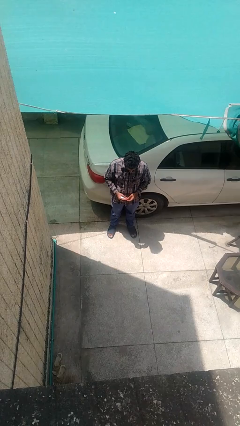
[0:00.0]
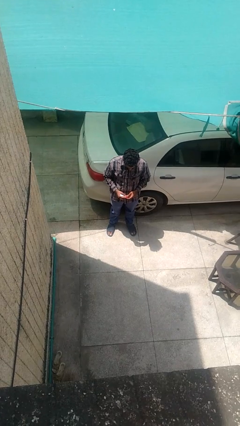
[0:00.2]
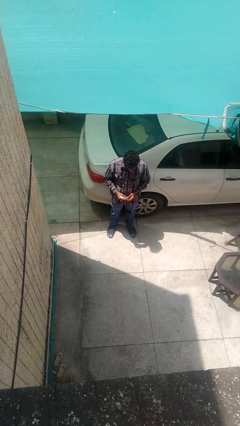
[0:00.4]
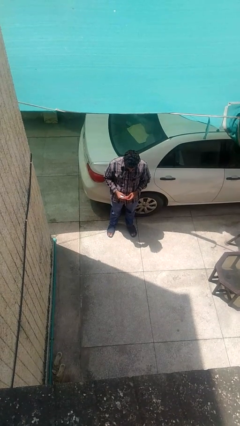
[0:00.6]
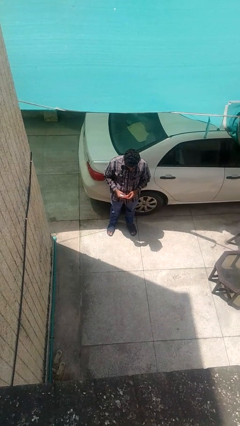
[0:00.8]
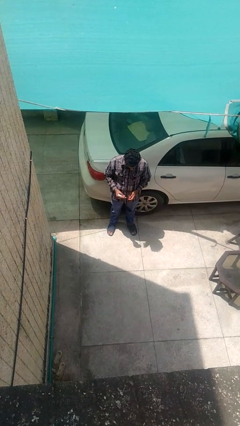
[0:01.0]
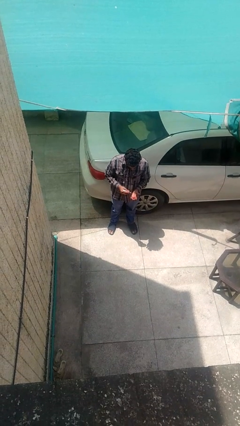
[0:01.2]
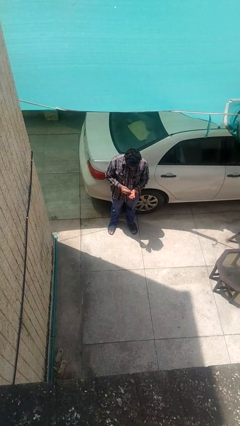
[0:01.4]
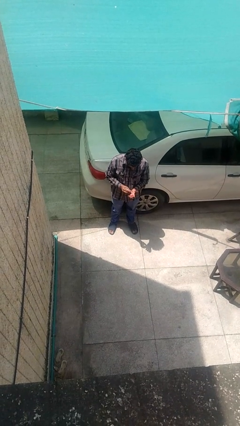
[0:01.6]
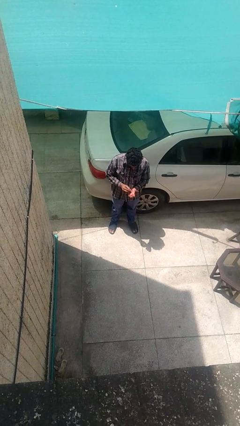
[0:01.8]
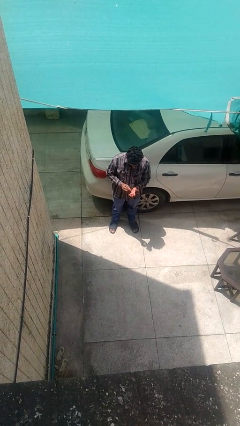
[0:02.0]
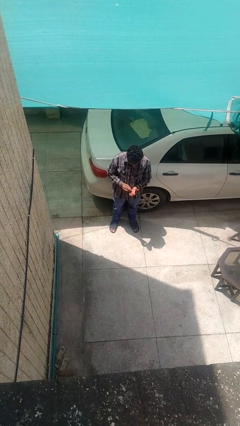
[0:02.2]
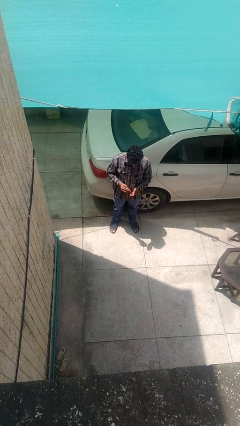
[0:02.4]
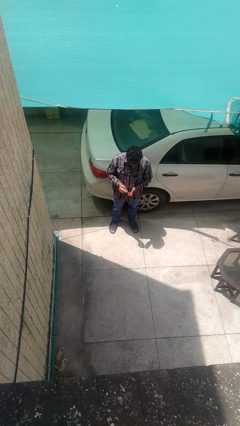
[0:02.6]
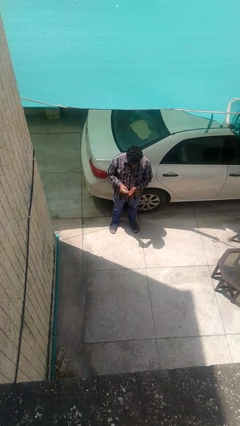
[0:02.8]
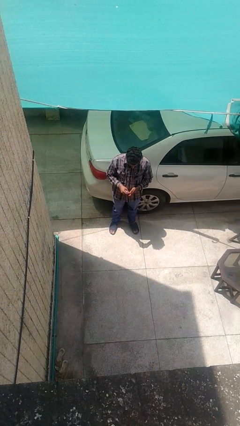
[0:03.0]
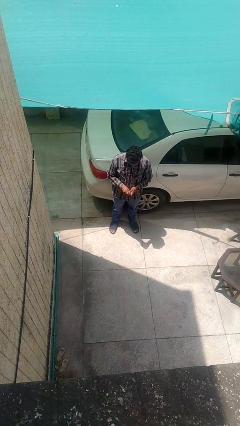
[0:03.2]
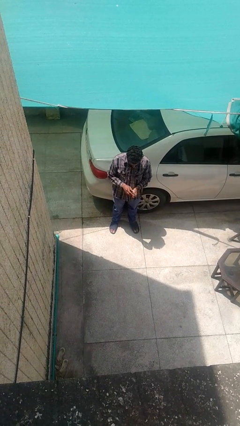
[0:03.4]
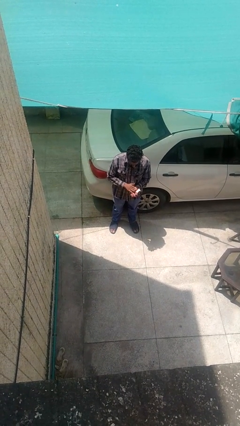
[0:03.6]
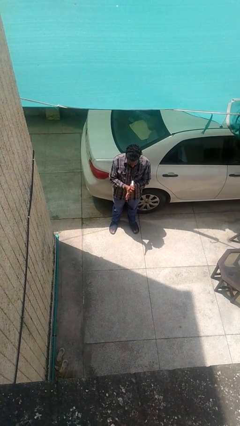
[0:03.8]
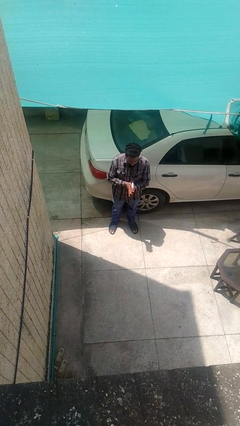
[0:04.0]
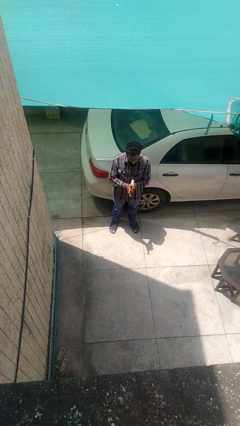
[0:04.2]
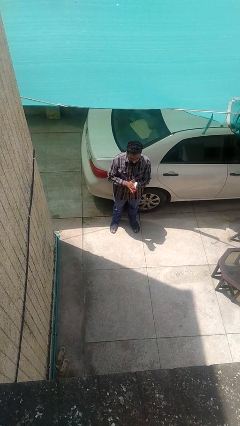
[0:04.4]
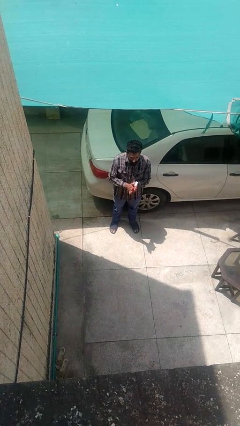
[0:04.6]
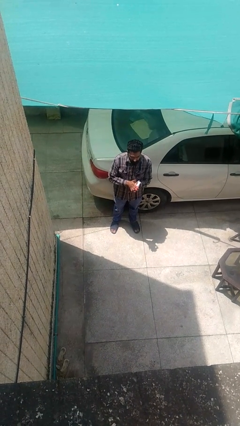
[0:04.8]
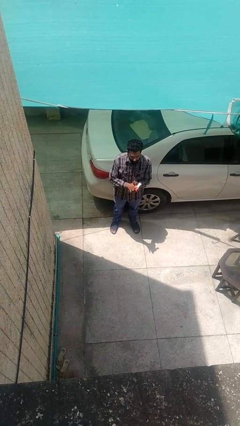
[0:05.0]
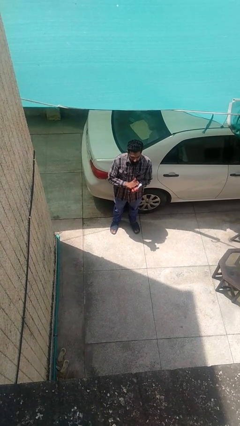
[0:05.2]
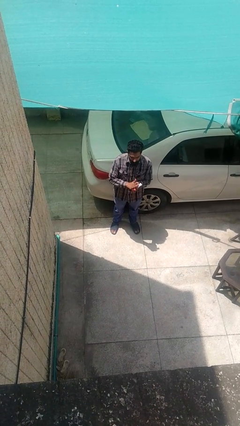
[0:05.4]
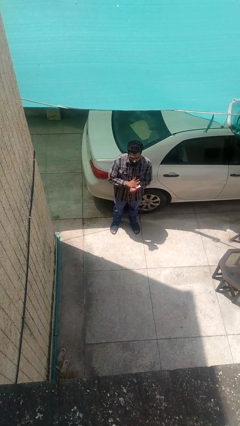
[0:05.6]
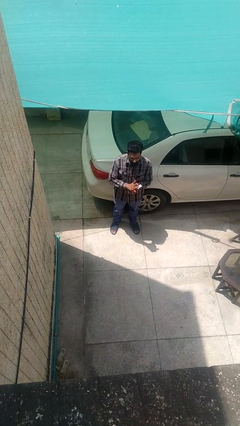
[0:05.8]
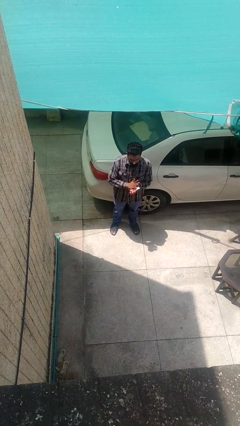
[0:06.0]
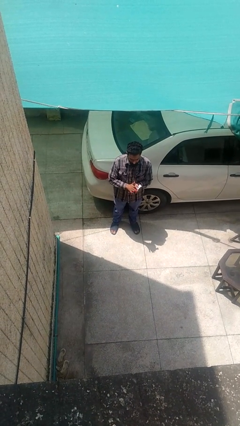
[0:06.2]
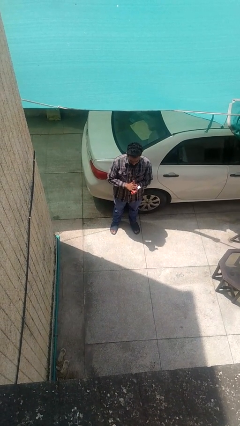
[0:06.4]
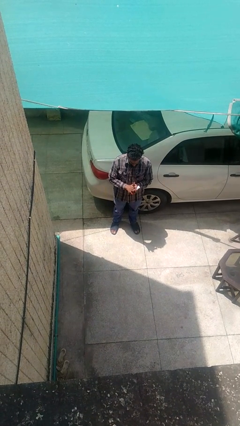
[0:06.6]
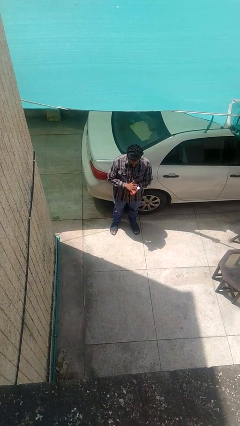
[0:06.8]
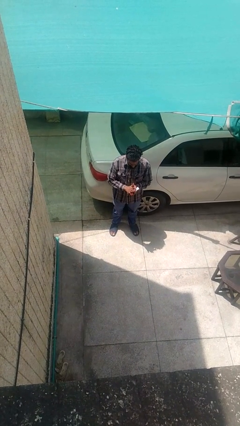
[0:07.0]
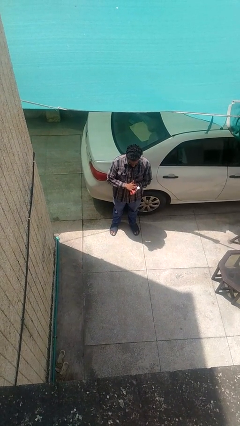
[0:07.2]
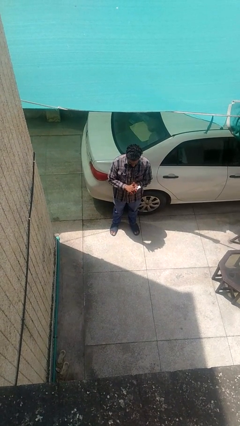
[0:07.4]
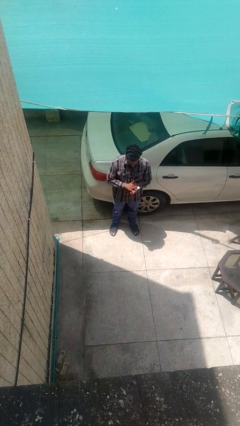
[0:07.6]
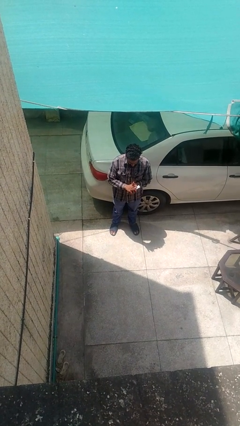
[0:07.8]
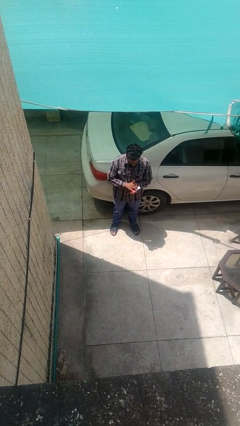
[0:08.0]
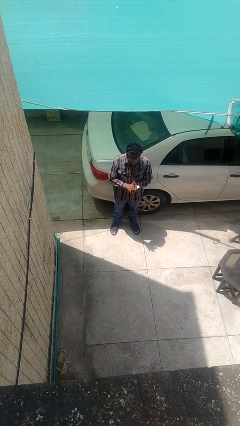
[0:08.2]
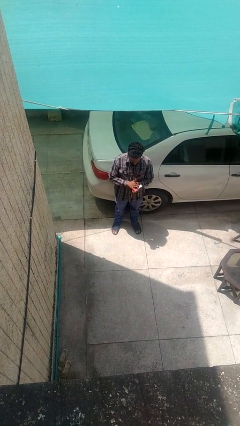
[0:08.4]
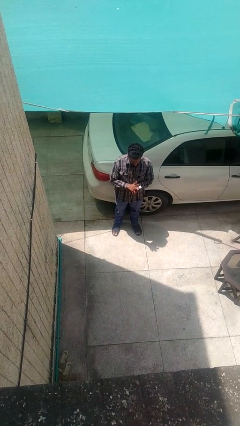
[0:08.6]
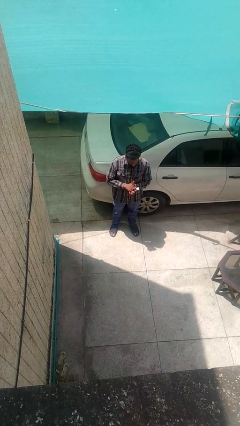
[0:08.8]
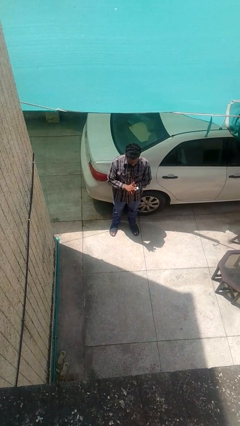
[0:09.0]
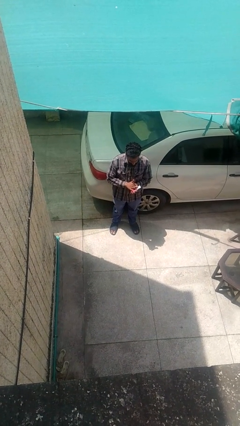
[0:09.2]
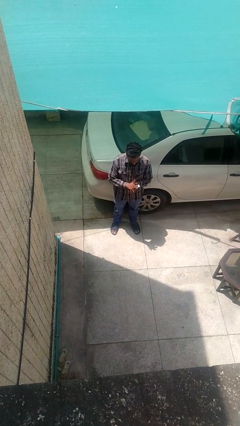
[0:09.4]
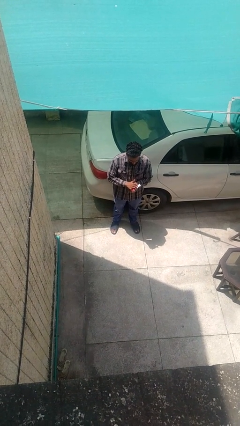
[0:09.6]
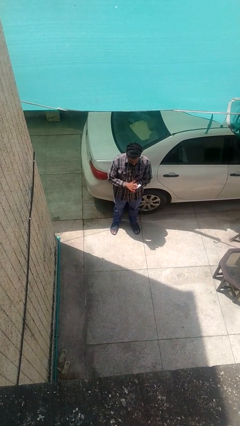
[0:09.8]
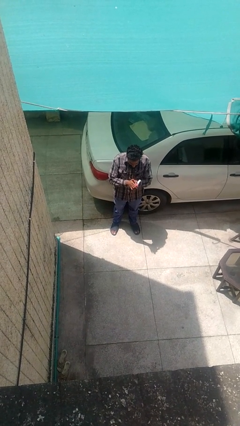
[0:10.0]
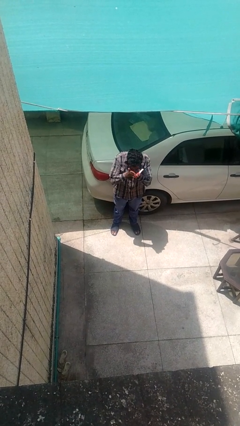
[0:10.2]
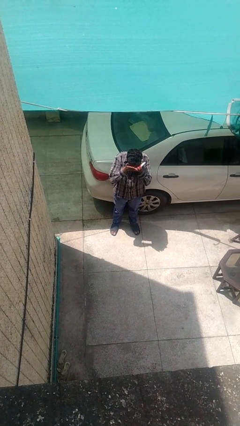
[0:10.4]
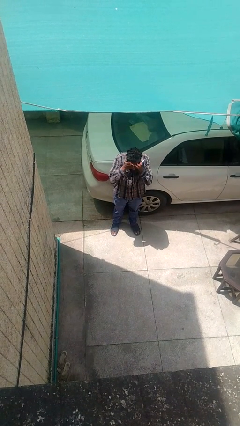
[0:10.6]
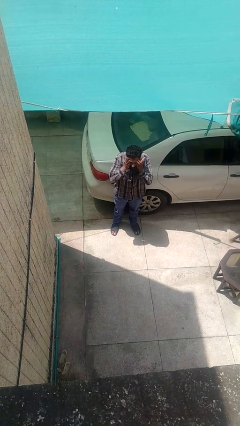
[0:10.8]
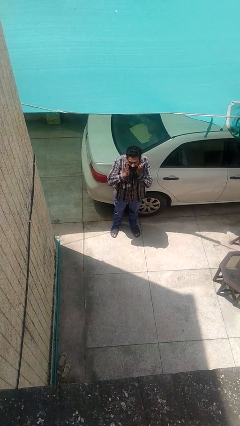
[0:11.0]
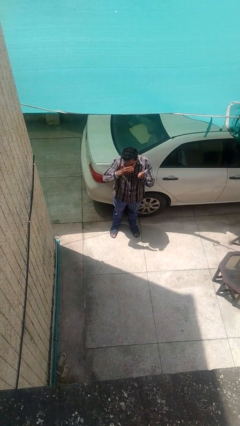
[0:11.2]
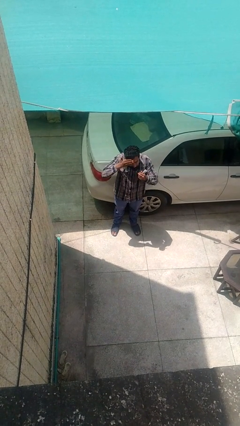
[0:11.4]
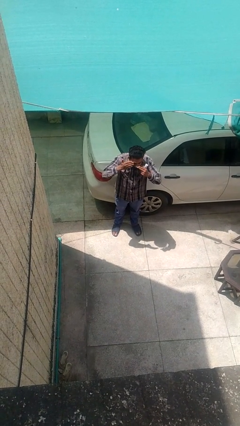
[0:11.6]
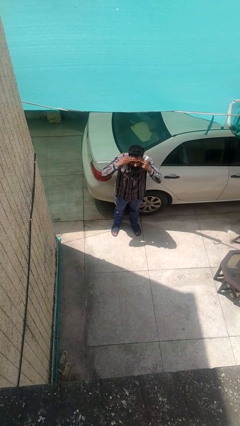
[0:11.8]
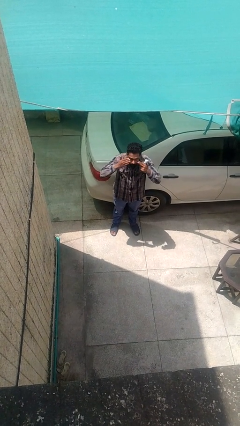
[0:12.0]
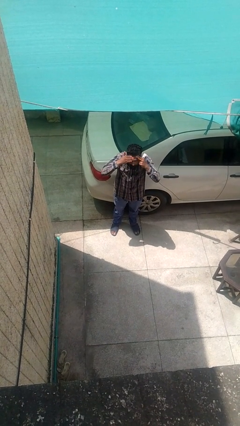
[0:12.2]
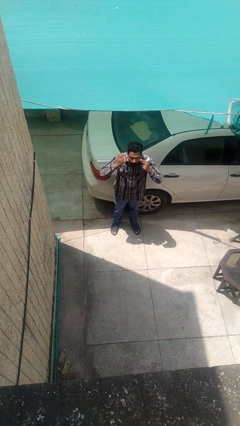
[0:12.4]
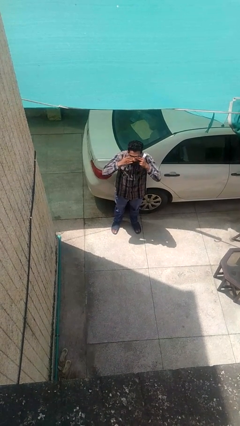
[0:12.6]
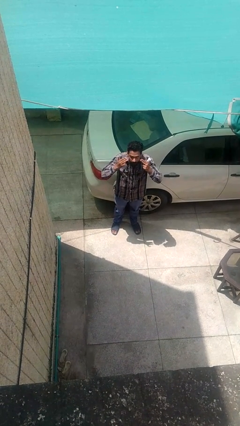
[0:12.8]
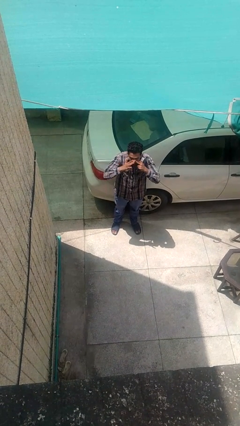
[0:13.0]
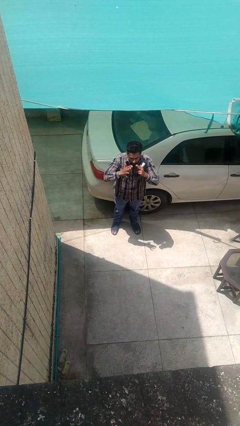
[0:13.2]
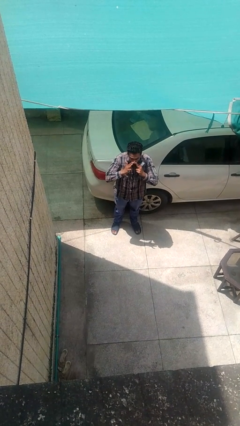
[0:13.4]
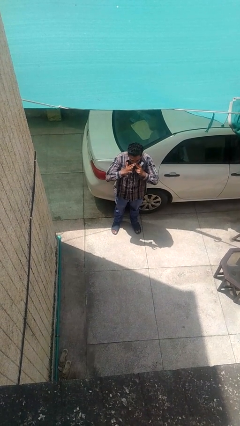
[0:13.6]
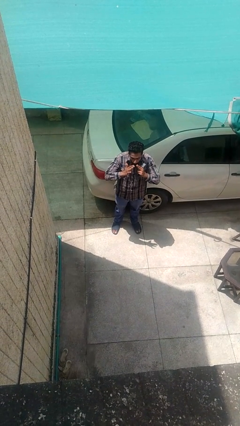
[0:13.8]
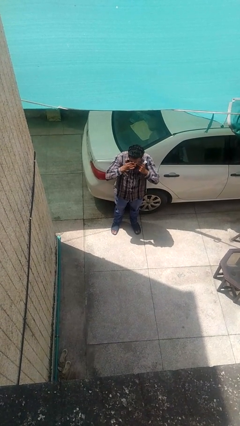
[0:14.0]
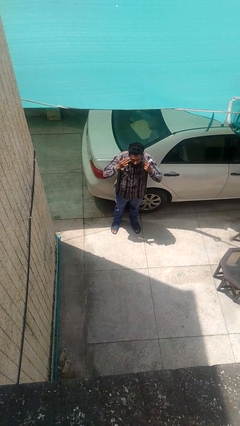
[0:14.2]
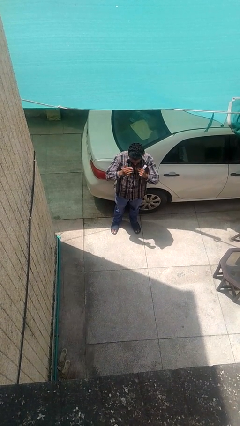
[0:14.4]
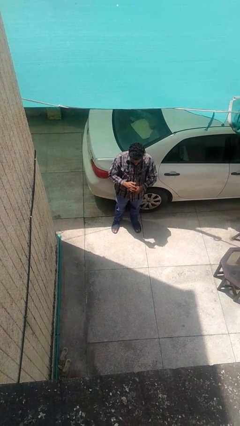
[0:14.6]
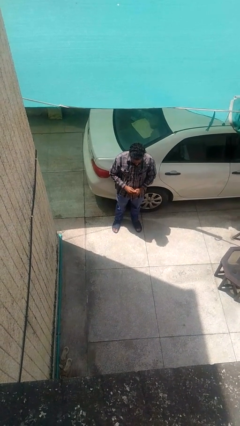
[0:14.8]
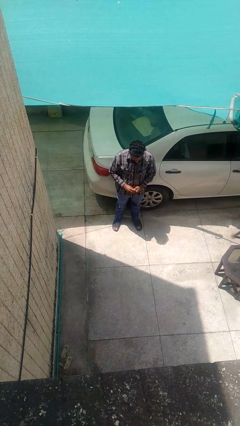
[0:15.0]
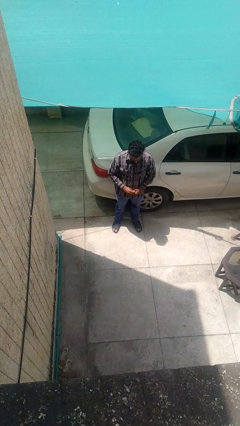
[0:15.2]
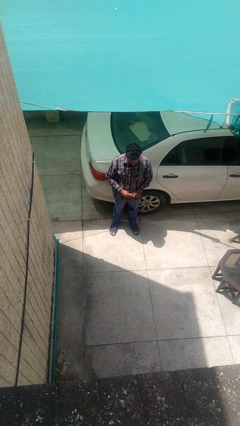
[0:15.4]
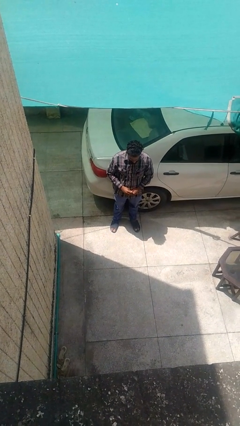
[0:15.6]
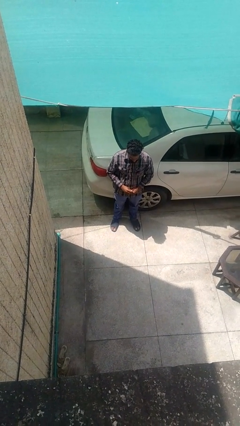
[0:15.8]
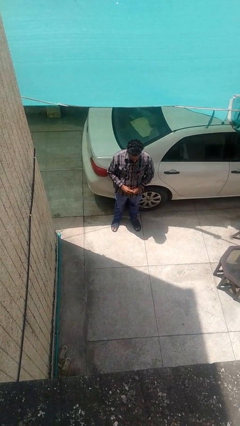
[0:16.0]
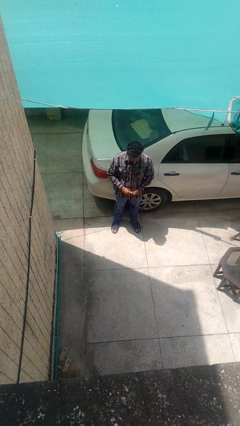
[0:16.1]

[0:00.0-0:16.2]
person applies facial moisturizer

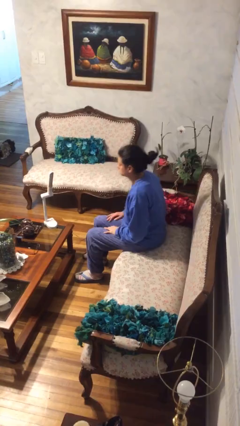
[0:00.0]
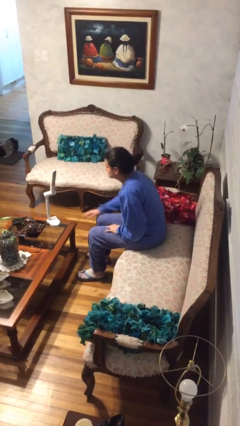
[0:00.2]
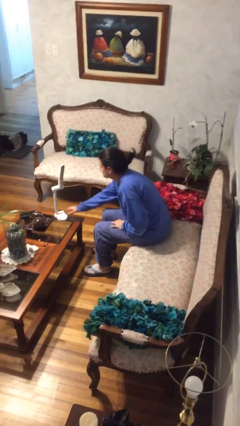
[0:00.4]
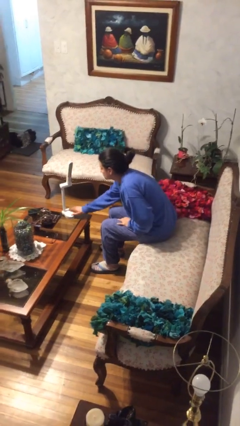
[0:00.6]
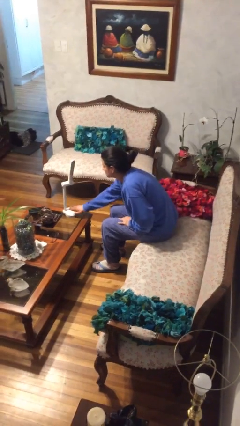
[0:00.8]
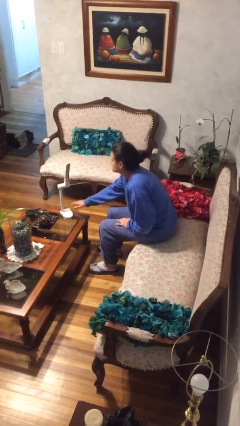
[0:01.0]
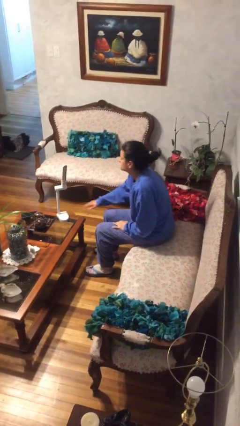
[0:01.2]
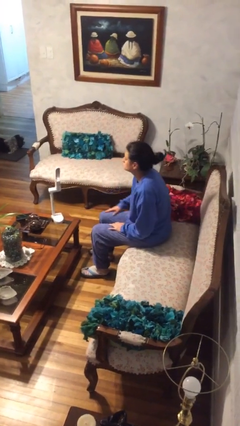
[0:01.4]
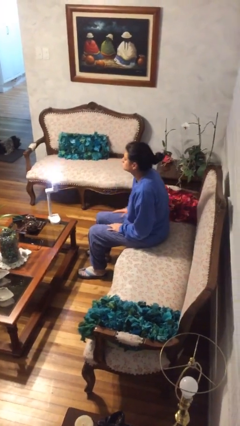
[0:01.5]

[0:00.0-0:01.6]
person turns on lamp

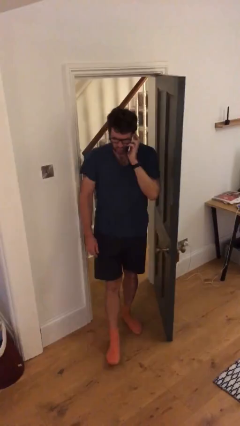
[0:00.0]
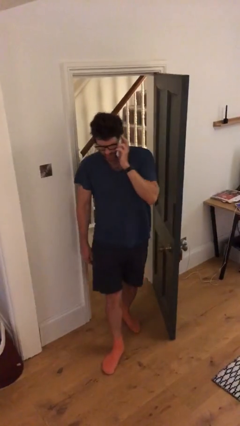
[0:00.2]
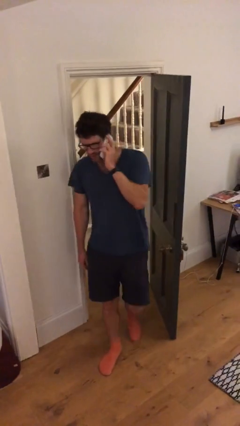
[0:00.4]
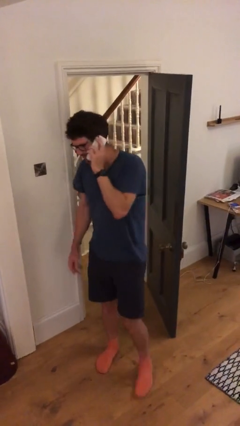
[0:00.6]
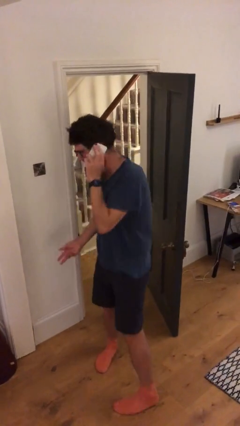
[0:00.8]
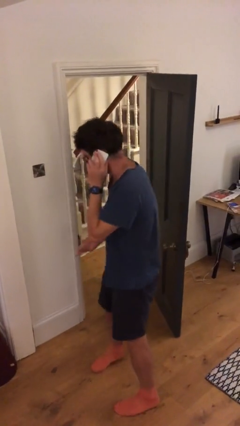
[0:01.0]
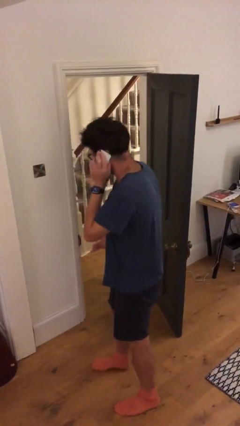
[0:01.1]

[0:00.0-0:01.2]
person enters scene through structure
